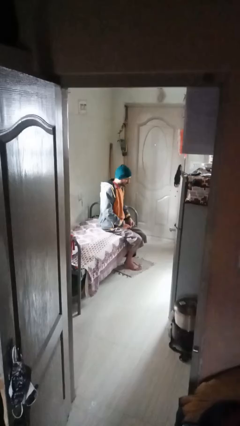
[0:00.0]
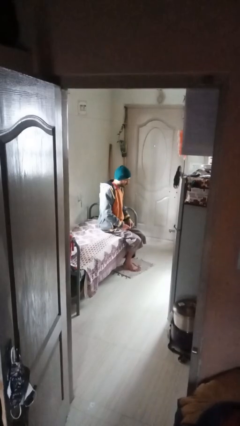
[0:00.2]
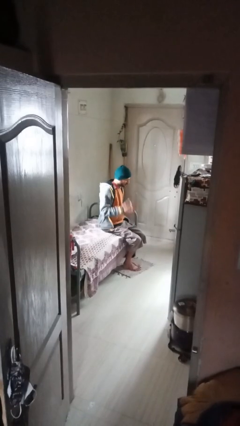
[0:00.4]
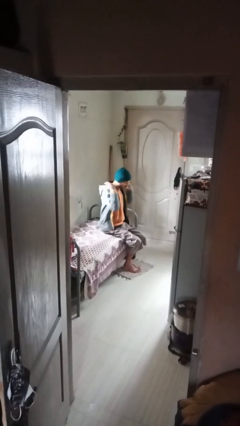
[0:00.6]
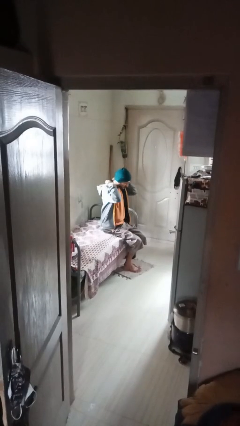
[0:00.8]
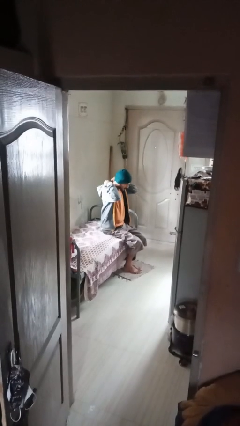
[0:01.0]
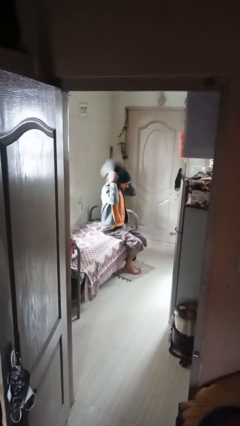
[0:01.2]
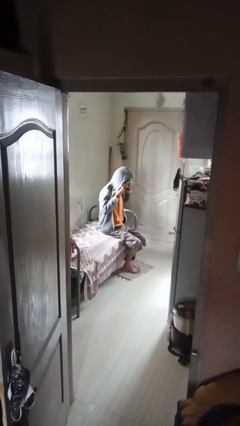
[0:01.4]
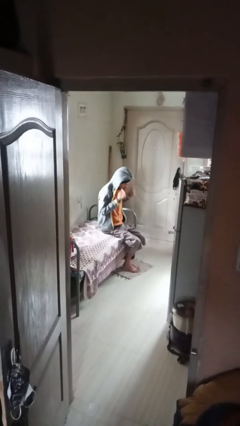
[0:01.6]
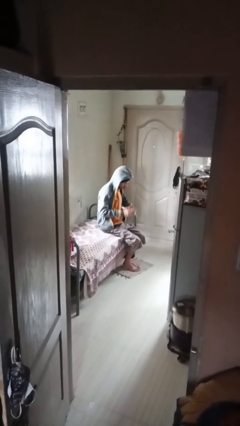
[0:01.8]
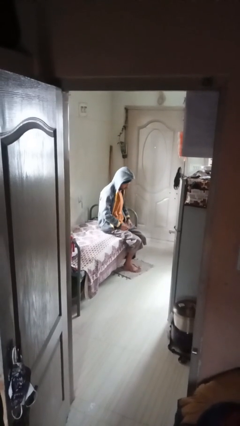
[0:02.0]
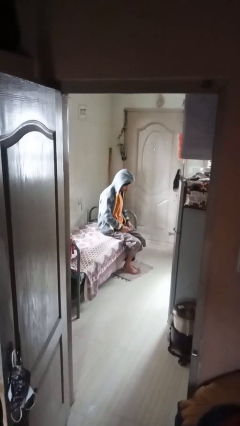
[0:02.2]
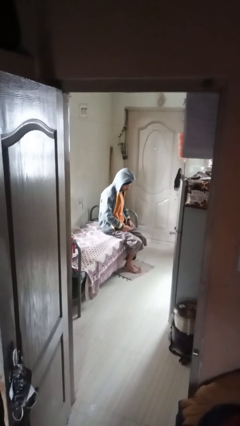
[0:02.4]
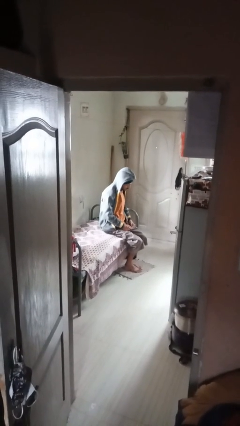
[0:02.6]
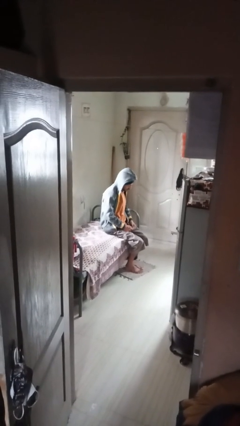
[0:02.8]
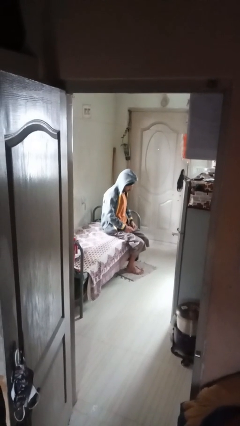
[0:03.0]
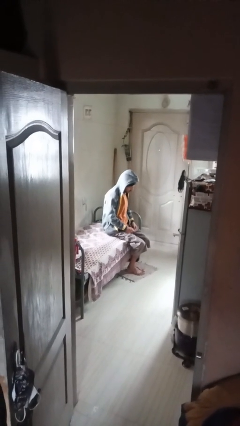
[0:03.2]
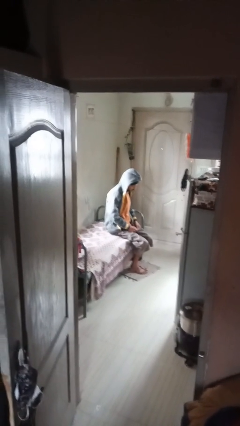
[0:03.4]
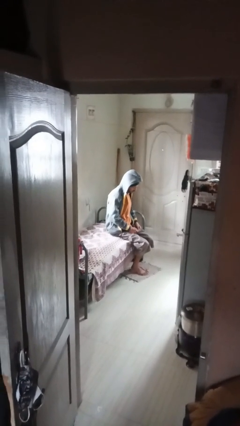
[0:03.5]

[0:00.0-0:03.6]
person puts on hoodie

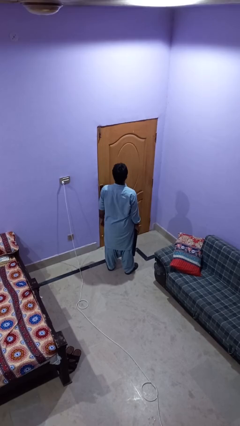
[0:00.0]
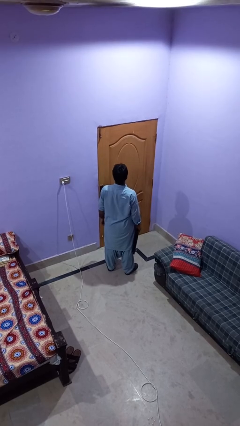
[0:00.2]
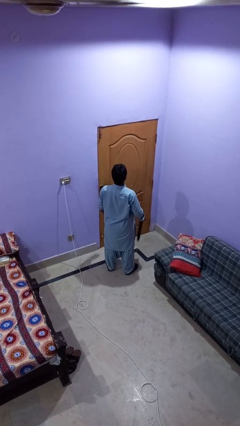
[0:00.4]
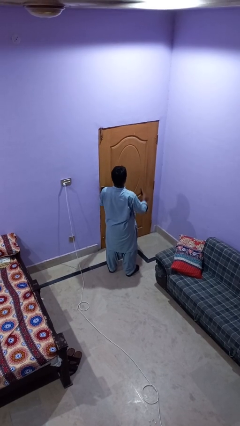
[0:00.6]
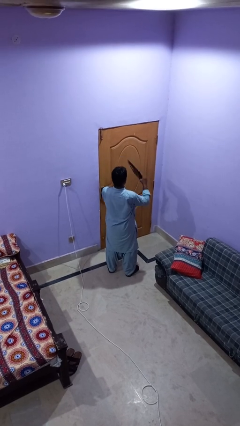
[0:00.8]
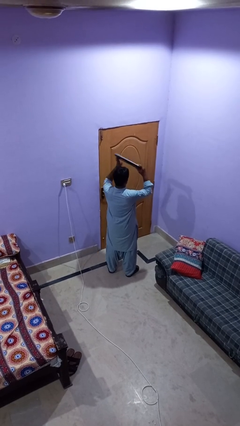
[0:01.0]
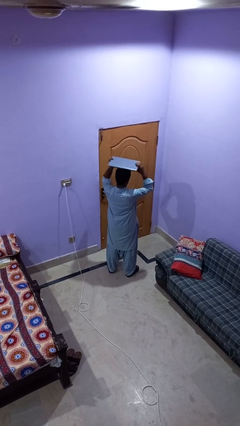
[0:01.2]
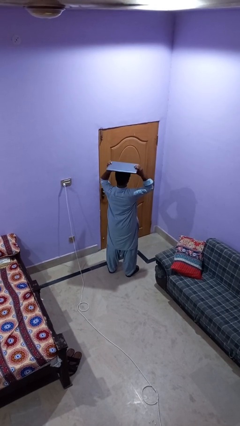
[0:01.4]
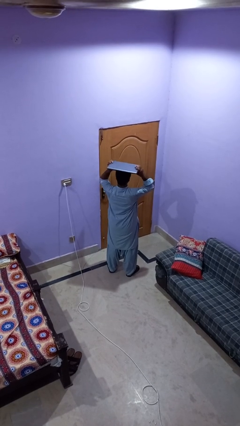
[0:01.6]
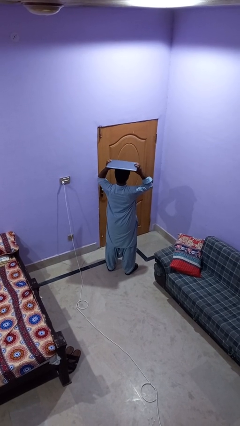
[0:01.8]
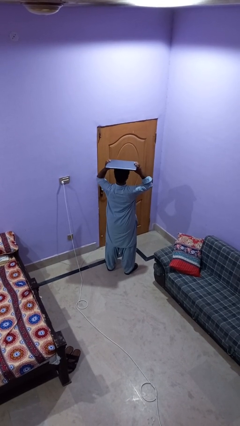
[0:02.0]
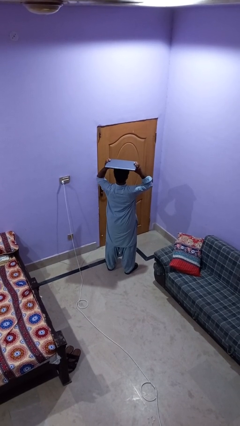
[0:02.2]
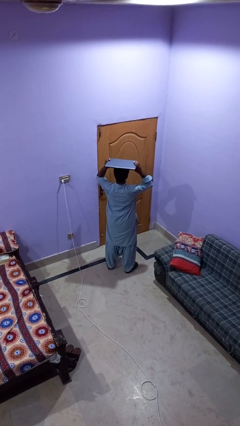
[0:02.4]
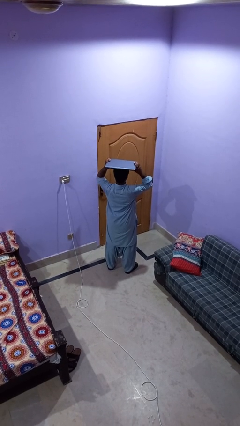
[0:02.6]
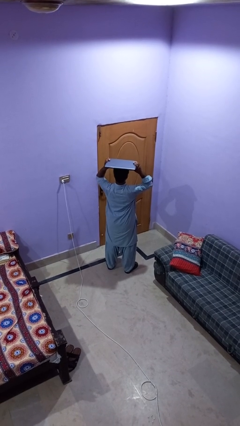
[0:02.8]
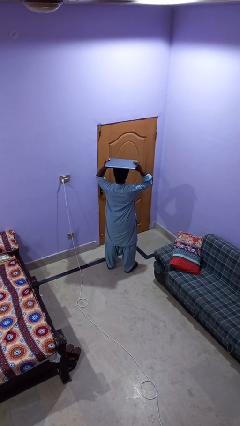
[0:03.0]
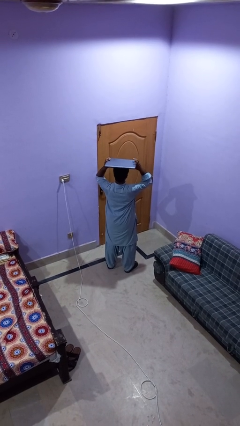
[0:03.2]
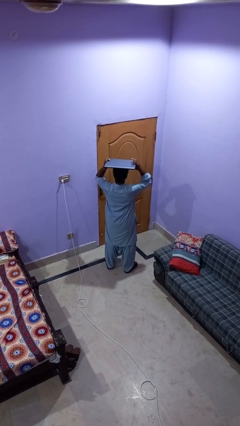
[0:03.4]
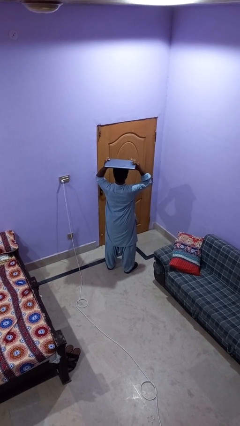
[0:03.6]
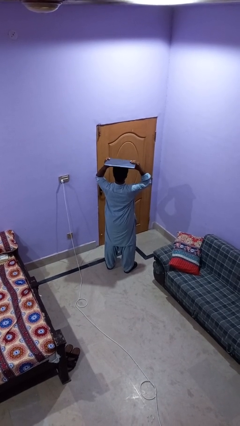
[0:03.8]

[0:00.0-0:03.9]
person holds object above head

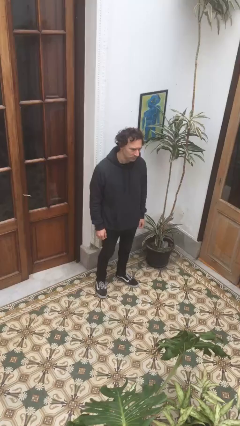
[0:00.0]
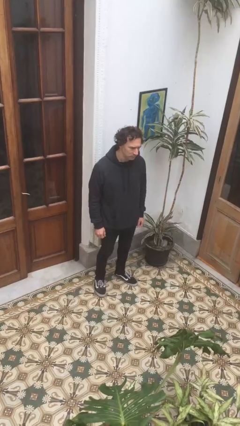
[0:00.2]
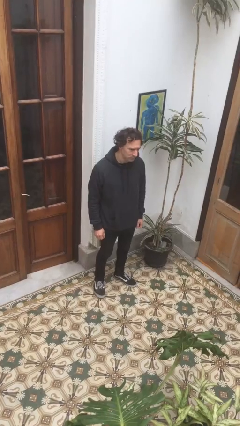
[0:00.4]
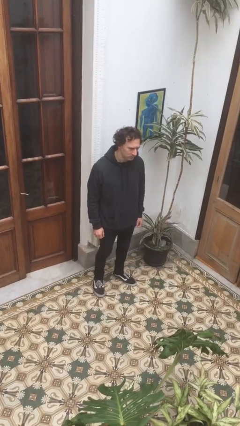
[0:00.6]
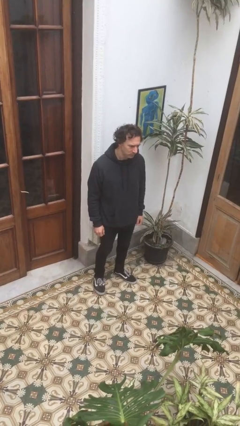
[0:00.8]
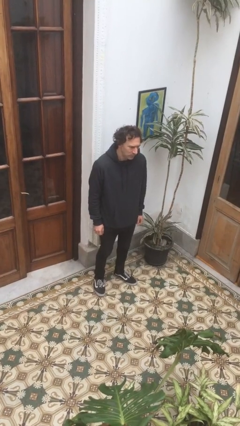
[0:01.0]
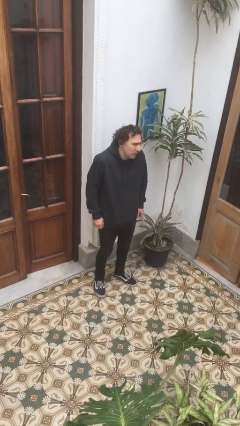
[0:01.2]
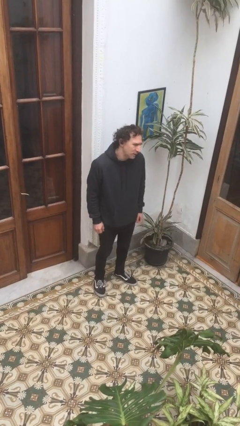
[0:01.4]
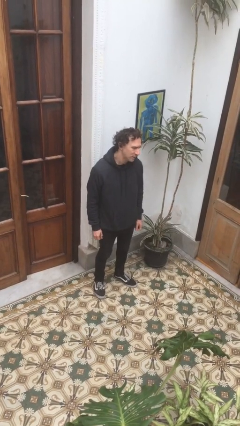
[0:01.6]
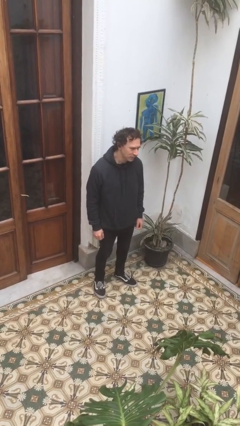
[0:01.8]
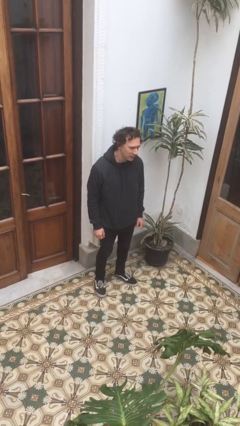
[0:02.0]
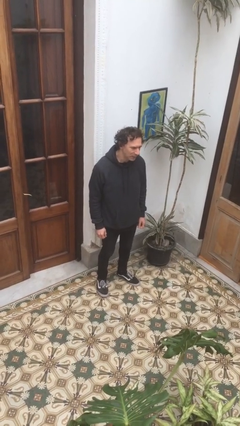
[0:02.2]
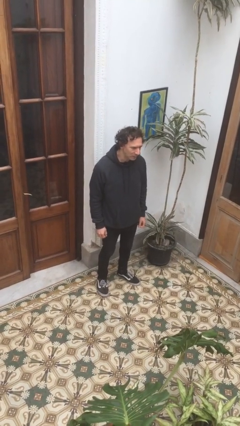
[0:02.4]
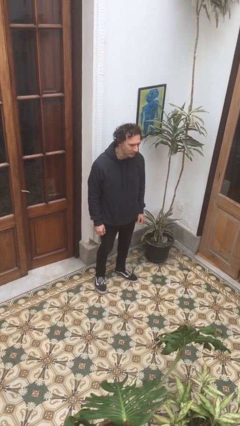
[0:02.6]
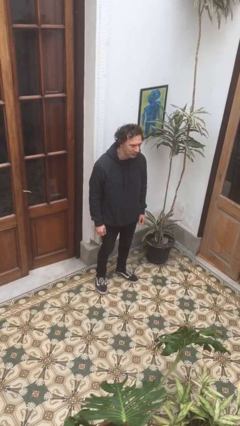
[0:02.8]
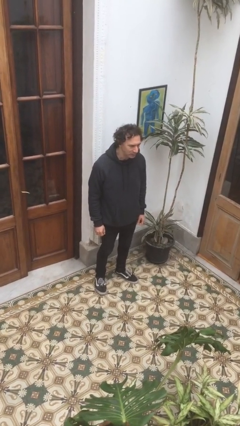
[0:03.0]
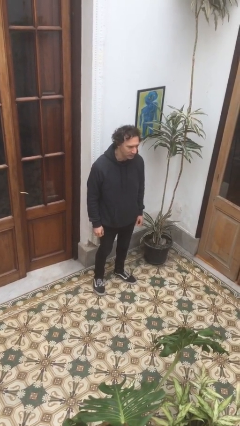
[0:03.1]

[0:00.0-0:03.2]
person shrugs

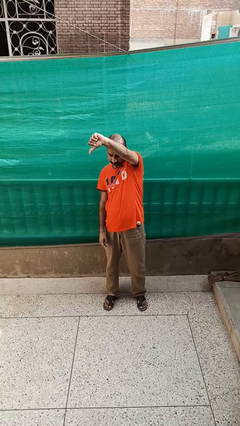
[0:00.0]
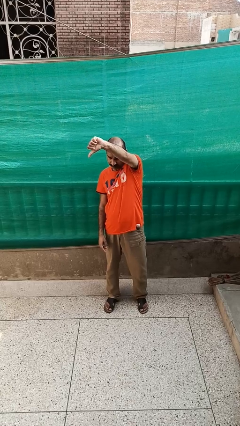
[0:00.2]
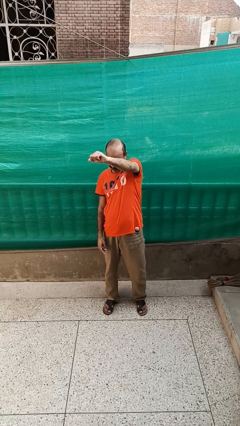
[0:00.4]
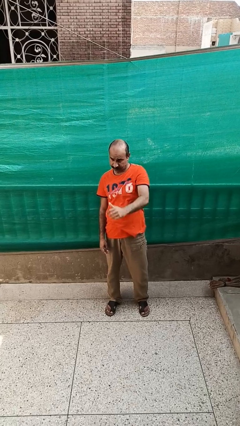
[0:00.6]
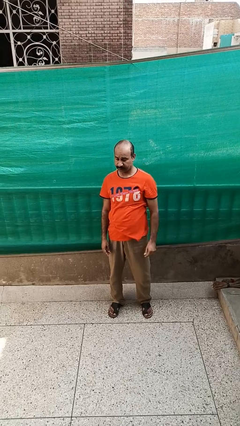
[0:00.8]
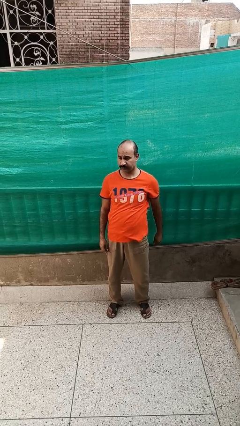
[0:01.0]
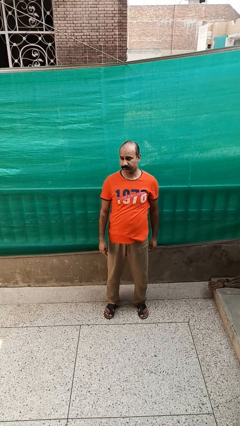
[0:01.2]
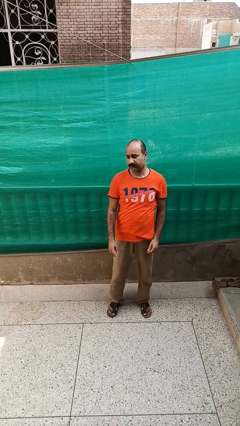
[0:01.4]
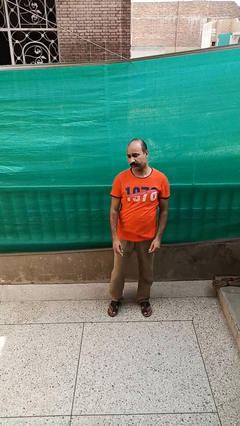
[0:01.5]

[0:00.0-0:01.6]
person gestures thumbs down

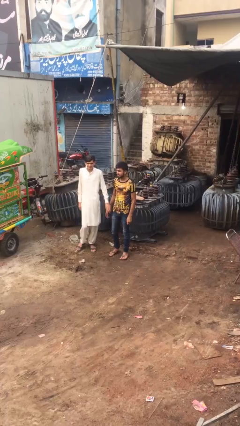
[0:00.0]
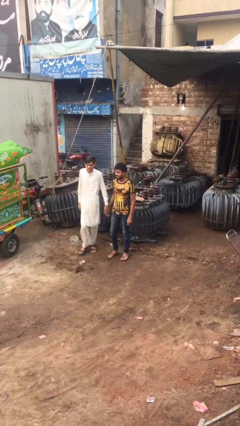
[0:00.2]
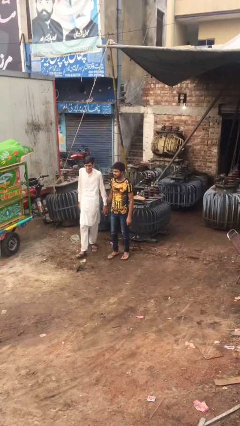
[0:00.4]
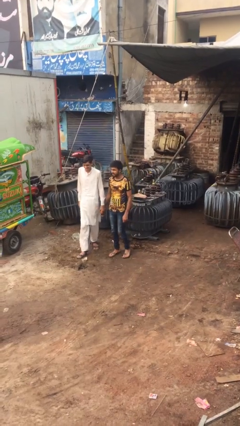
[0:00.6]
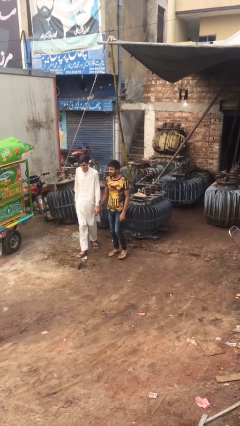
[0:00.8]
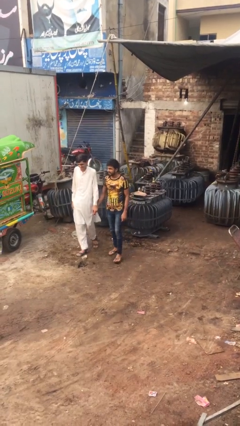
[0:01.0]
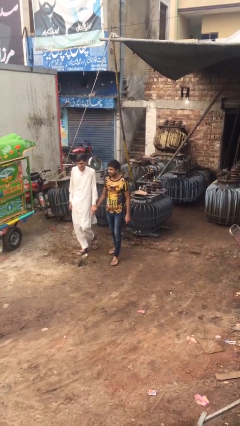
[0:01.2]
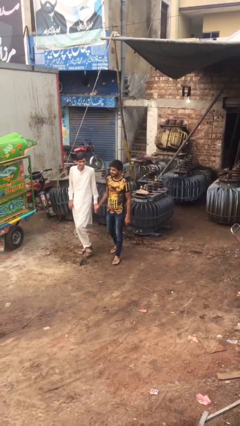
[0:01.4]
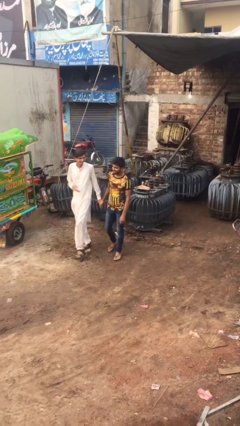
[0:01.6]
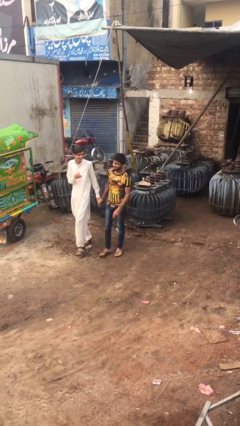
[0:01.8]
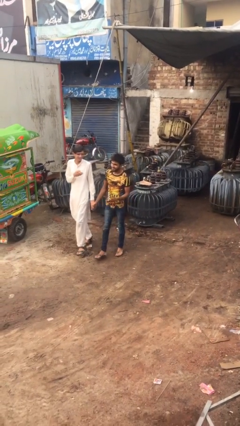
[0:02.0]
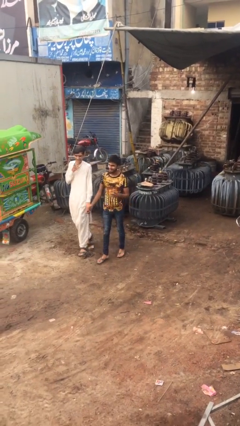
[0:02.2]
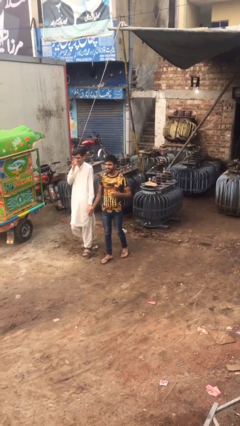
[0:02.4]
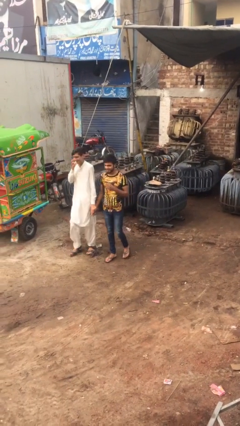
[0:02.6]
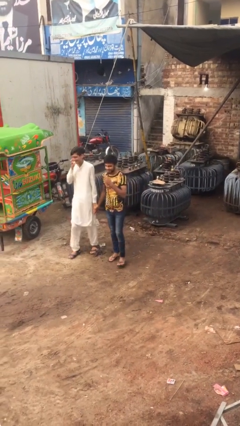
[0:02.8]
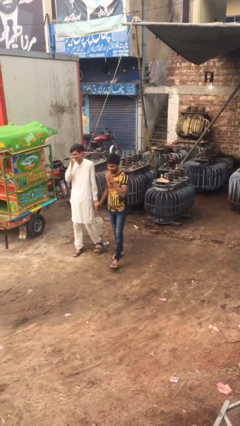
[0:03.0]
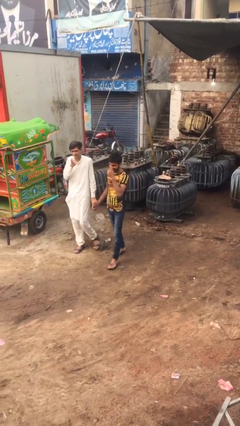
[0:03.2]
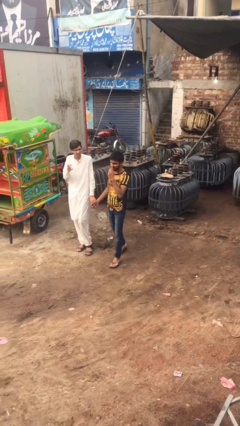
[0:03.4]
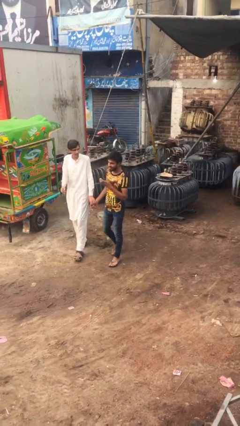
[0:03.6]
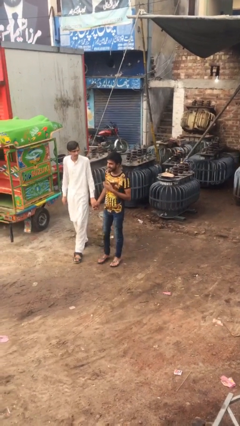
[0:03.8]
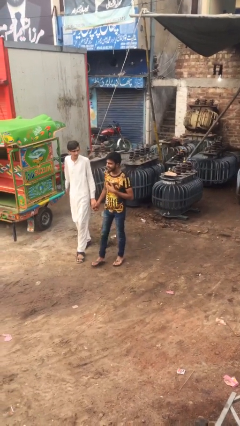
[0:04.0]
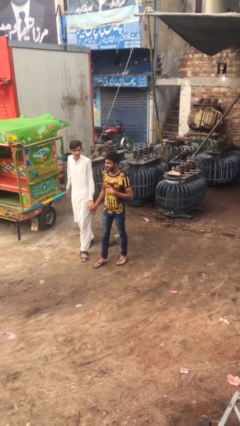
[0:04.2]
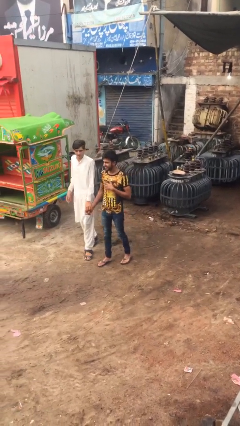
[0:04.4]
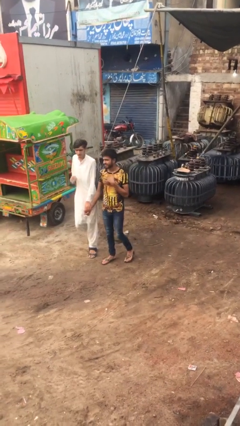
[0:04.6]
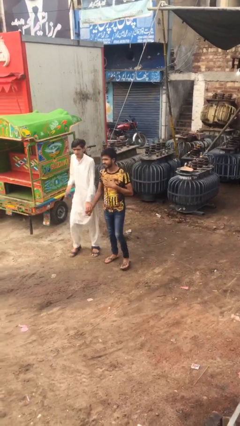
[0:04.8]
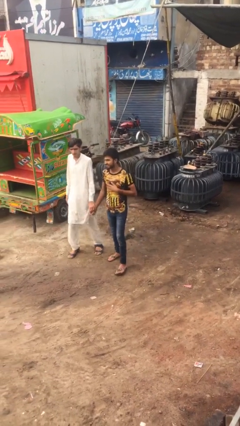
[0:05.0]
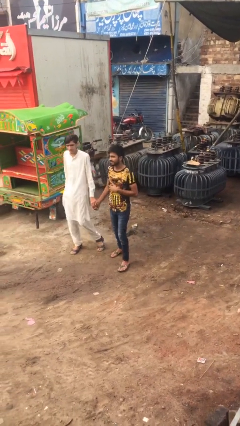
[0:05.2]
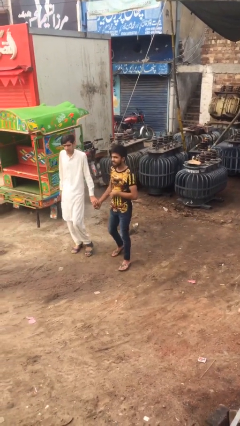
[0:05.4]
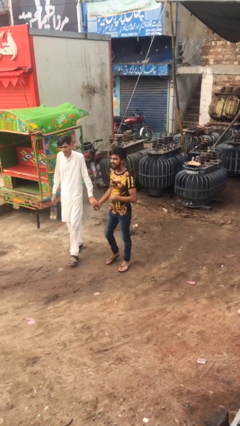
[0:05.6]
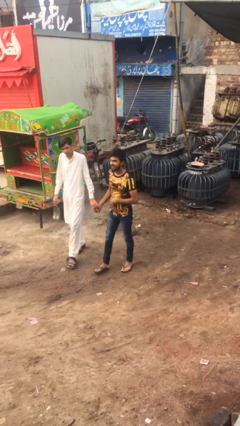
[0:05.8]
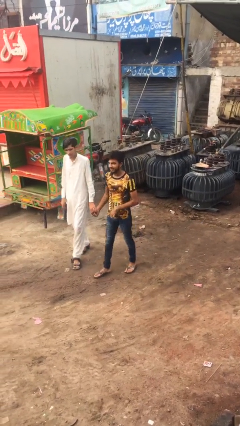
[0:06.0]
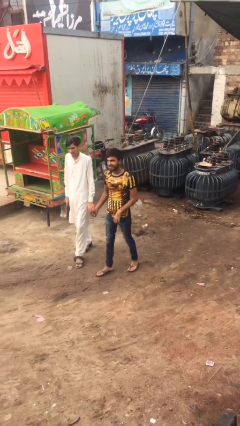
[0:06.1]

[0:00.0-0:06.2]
person holds hand
